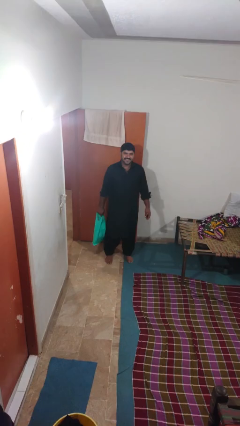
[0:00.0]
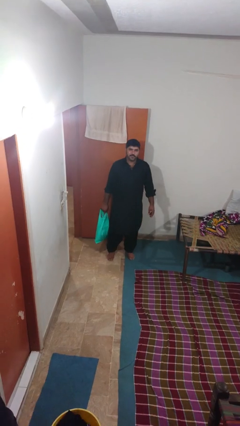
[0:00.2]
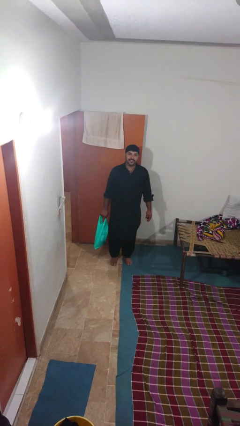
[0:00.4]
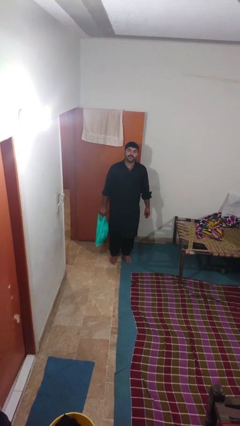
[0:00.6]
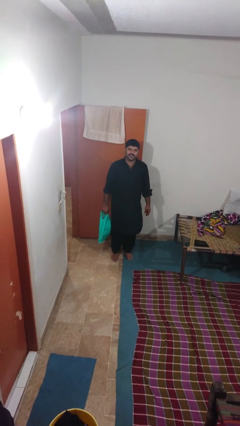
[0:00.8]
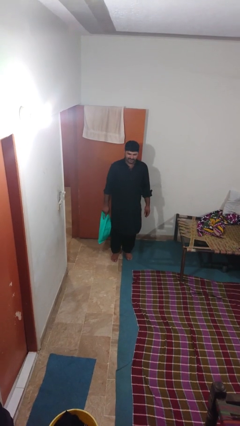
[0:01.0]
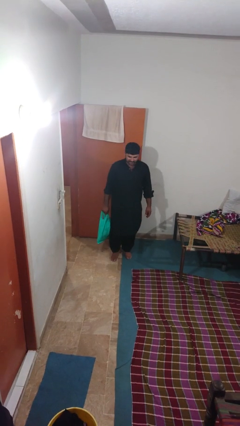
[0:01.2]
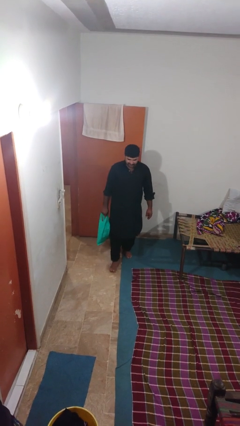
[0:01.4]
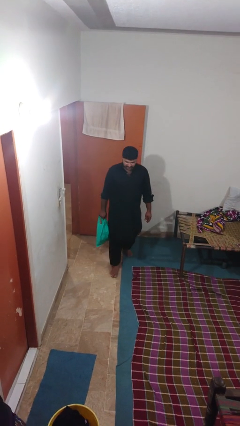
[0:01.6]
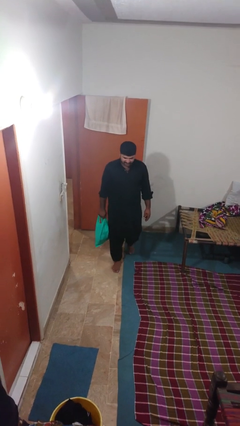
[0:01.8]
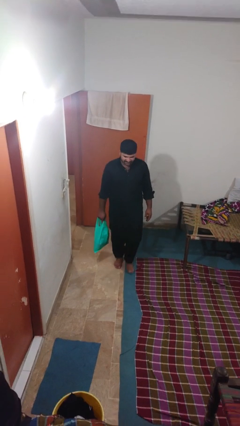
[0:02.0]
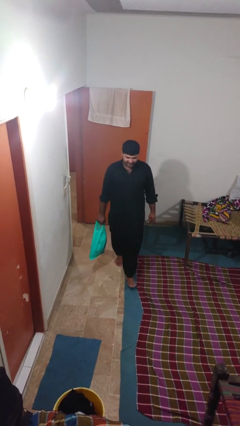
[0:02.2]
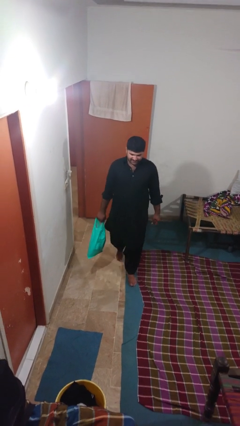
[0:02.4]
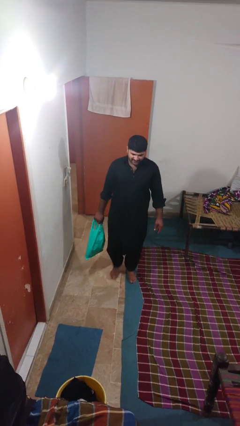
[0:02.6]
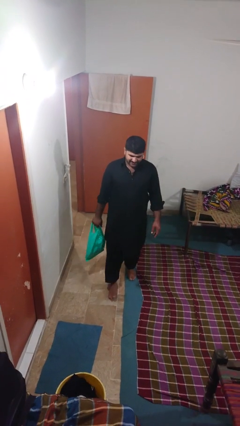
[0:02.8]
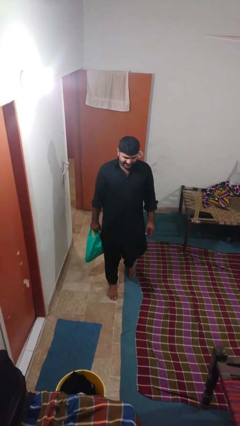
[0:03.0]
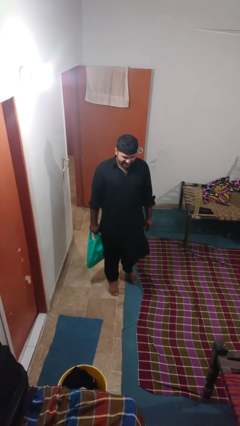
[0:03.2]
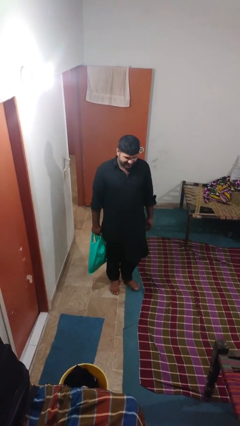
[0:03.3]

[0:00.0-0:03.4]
person carries groceries

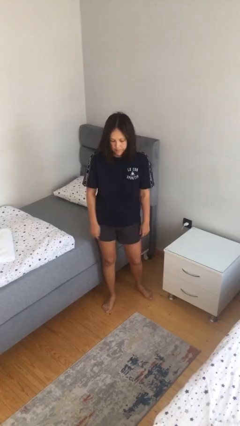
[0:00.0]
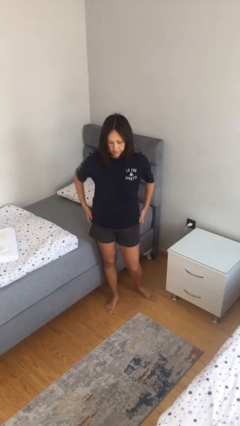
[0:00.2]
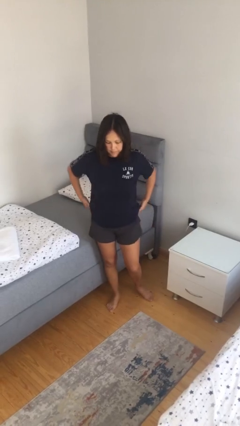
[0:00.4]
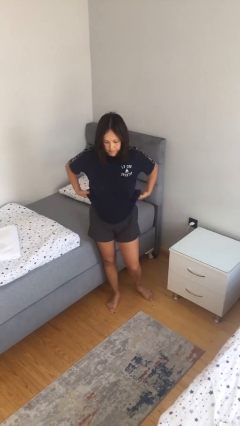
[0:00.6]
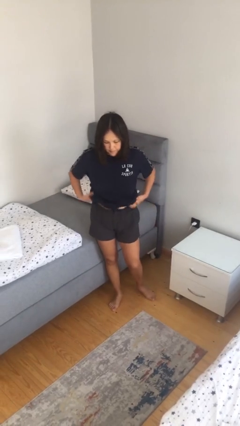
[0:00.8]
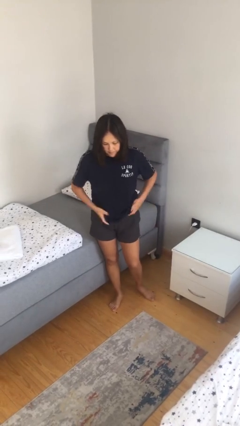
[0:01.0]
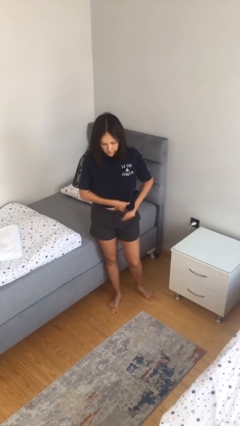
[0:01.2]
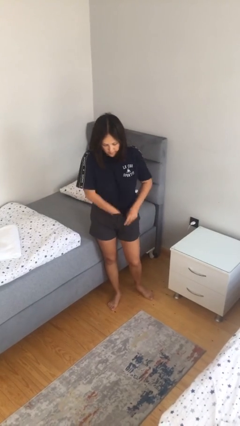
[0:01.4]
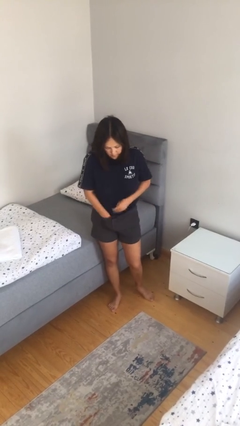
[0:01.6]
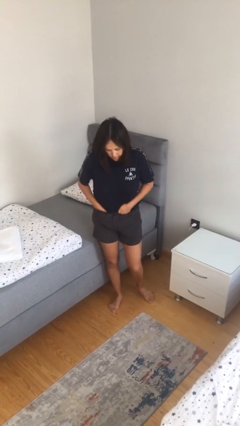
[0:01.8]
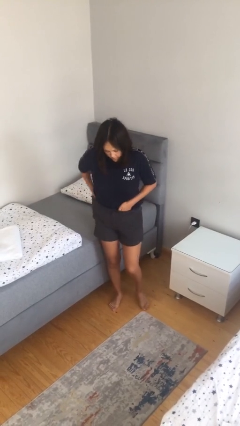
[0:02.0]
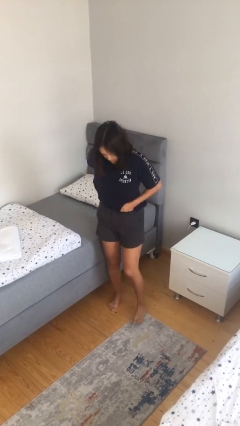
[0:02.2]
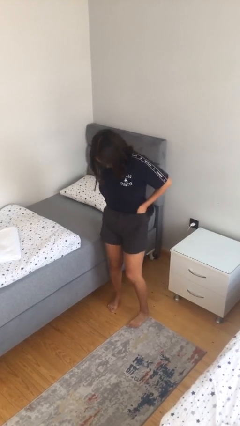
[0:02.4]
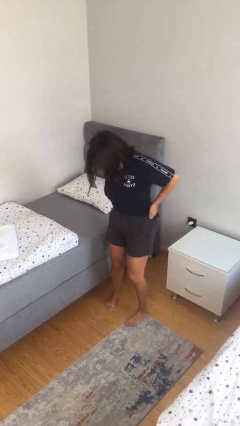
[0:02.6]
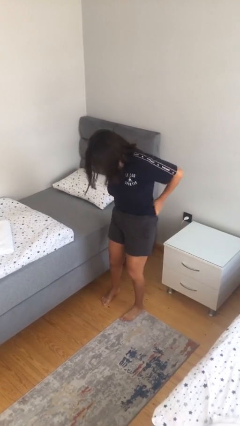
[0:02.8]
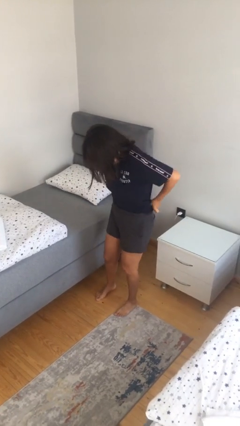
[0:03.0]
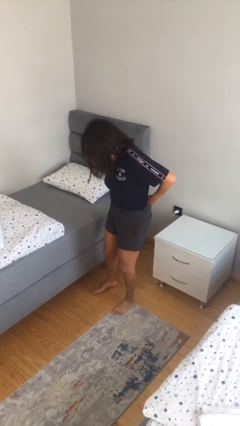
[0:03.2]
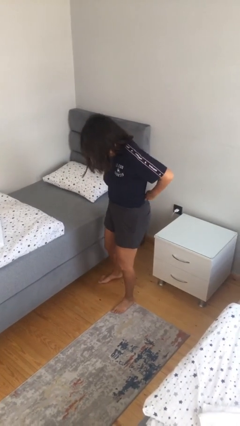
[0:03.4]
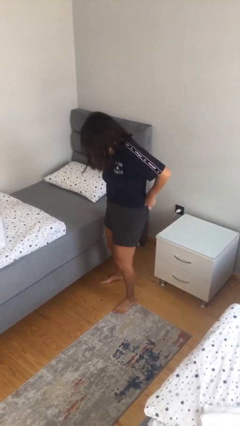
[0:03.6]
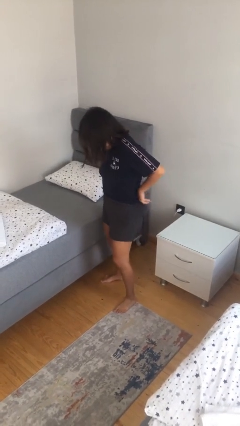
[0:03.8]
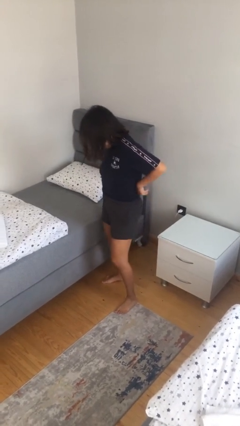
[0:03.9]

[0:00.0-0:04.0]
person tucks in shirt

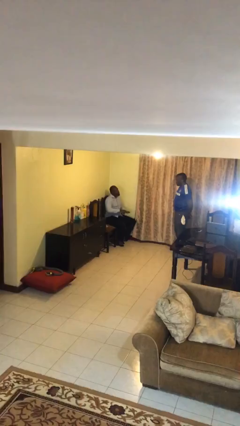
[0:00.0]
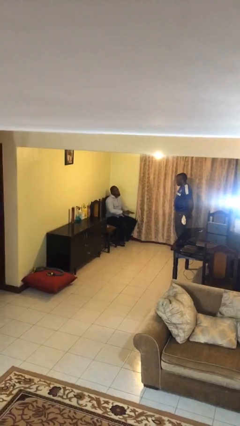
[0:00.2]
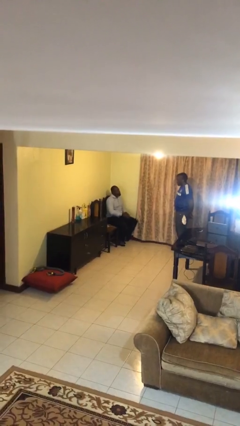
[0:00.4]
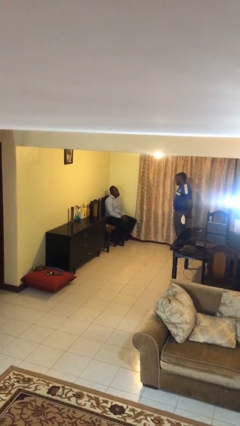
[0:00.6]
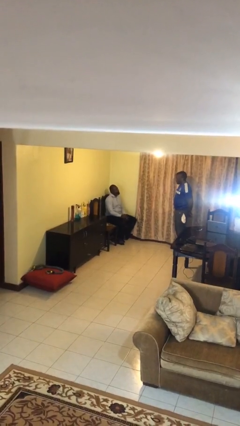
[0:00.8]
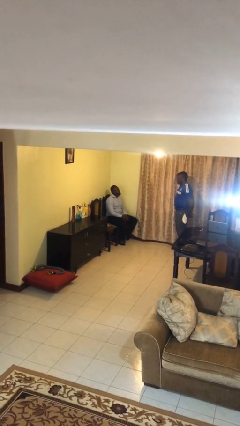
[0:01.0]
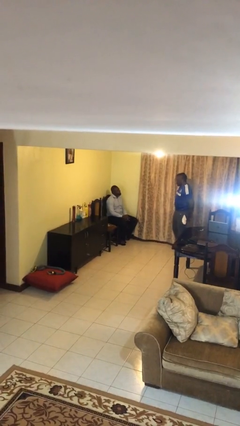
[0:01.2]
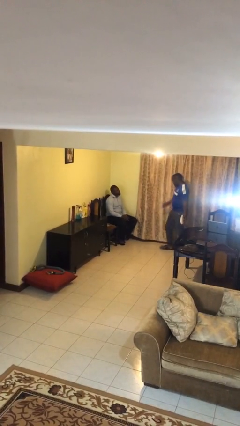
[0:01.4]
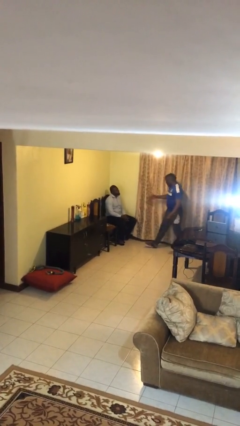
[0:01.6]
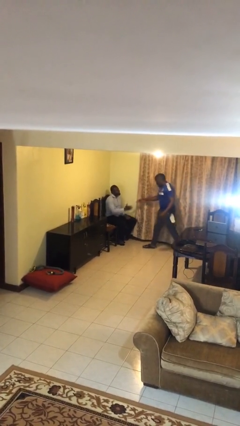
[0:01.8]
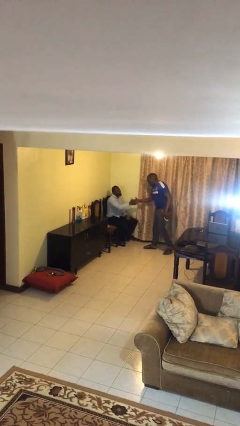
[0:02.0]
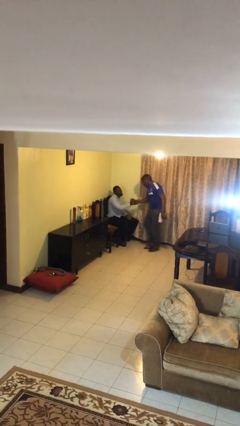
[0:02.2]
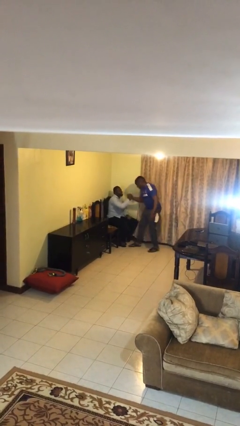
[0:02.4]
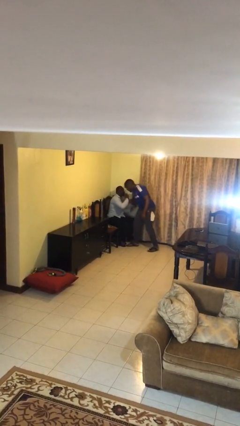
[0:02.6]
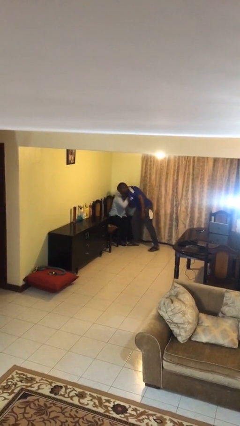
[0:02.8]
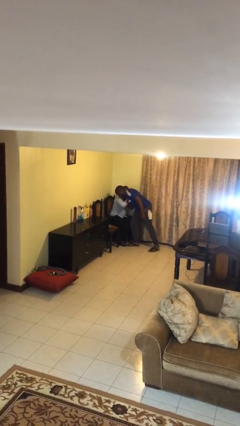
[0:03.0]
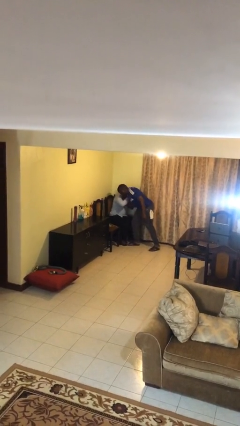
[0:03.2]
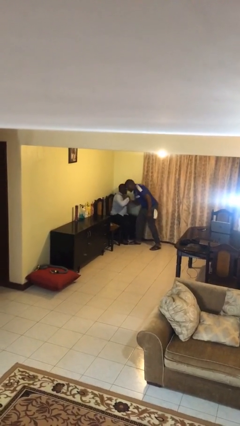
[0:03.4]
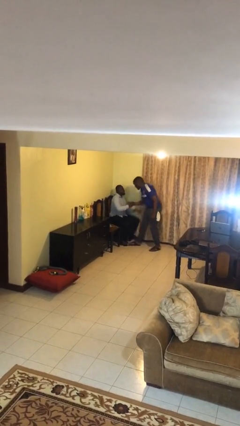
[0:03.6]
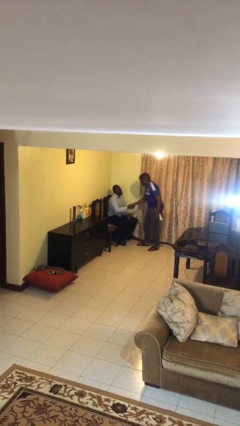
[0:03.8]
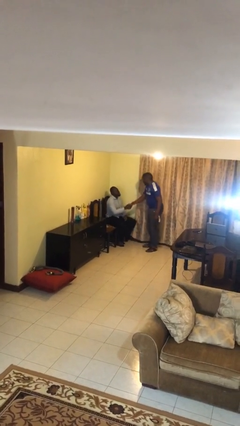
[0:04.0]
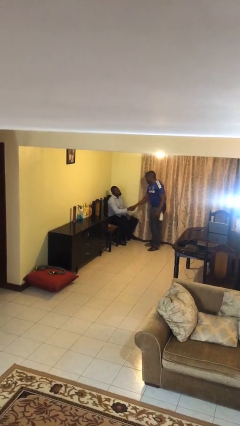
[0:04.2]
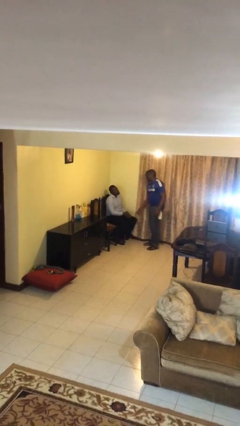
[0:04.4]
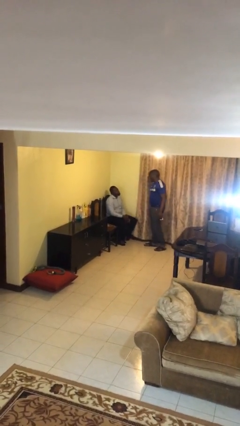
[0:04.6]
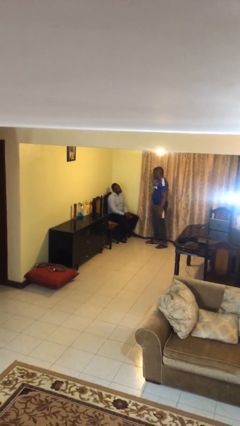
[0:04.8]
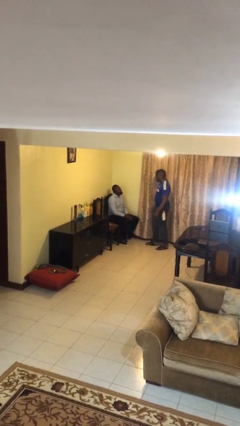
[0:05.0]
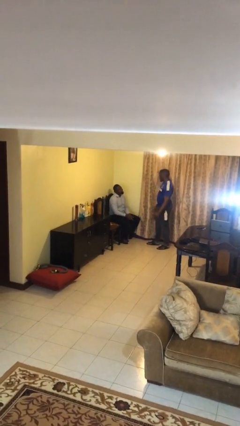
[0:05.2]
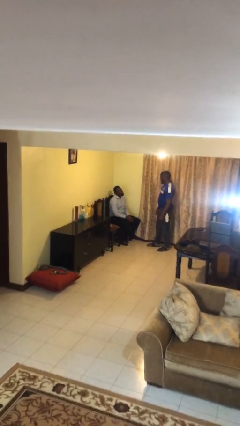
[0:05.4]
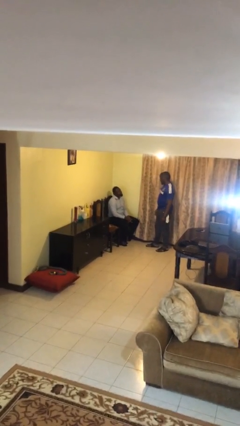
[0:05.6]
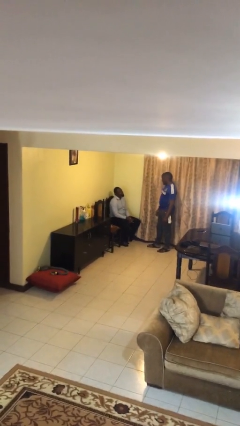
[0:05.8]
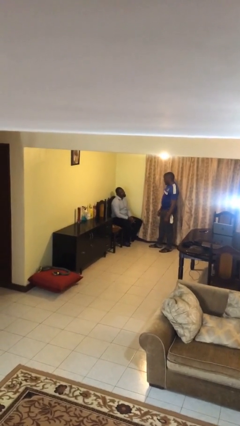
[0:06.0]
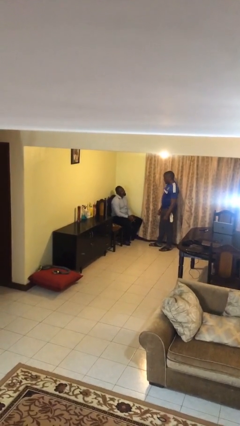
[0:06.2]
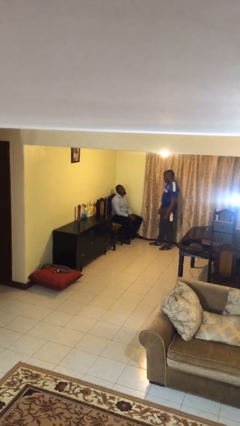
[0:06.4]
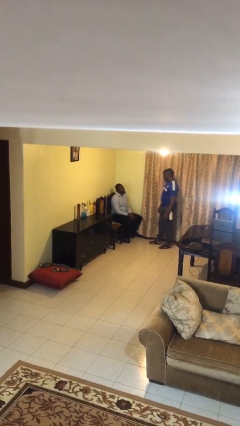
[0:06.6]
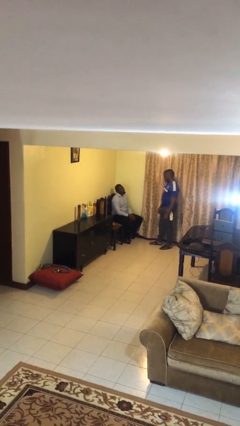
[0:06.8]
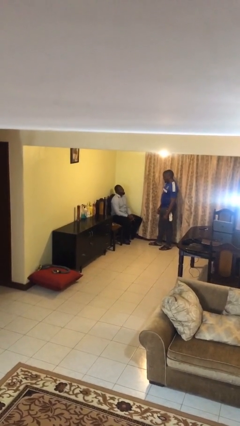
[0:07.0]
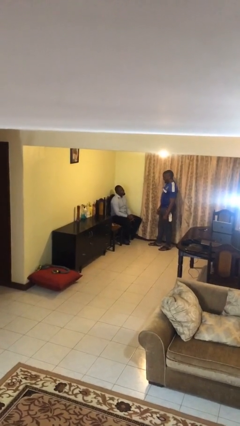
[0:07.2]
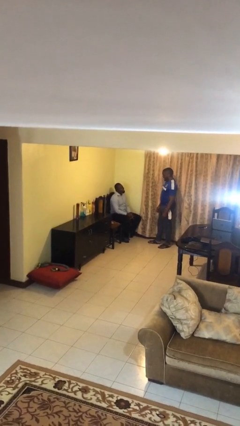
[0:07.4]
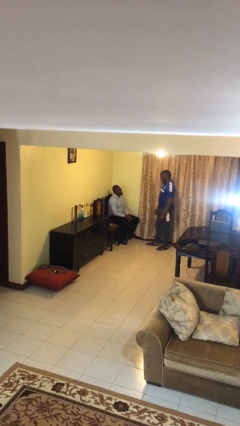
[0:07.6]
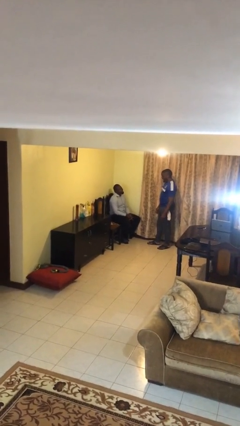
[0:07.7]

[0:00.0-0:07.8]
person embraces person

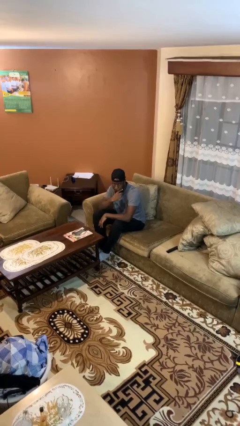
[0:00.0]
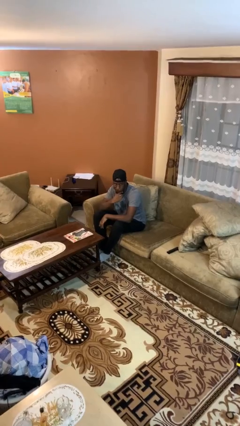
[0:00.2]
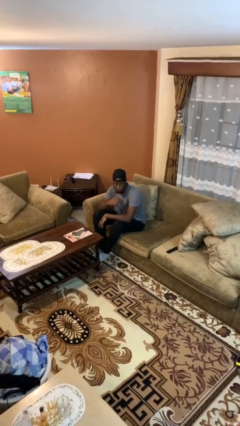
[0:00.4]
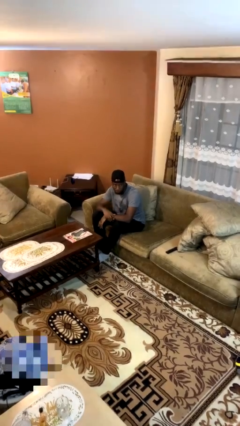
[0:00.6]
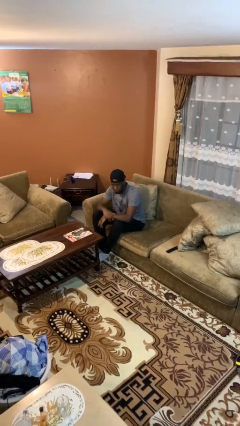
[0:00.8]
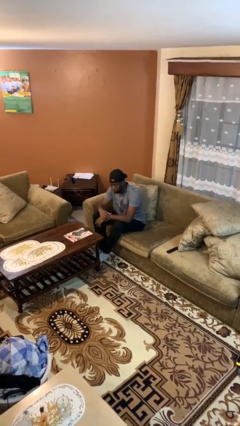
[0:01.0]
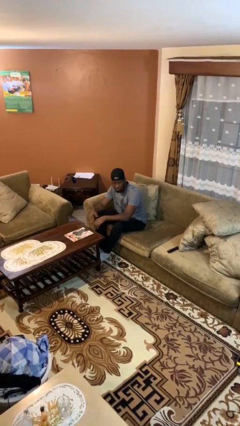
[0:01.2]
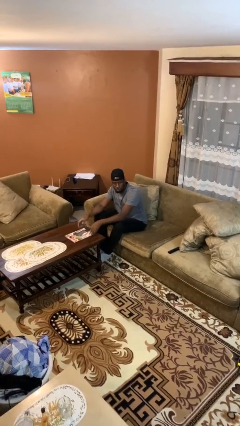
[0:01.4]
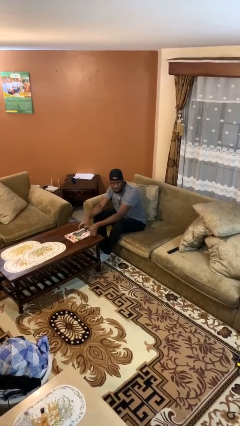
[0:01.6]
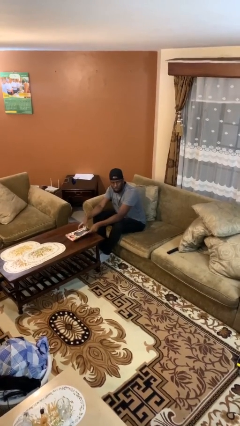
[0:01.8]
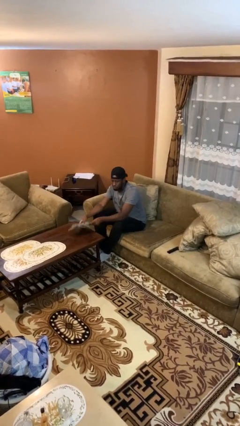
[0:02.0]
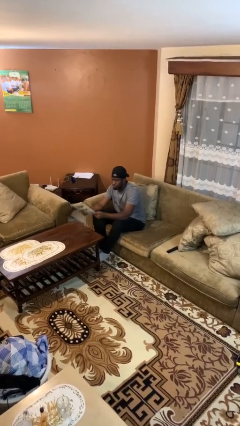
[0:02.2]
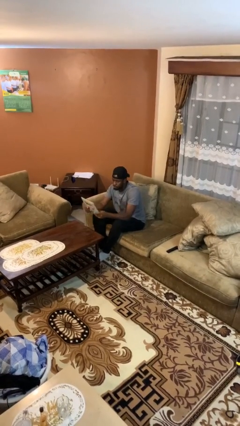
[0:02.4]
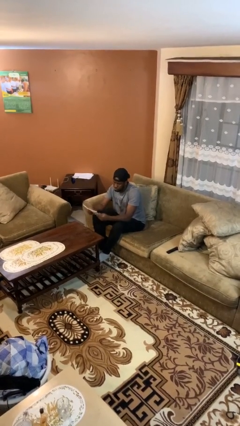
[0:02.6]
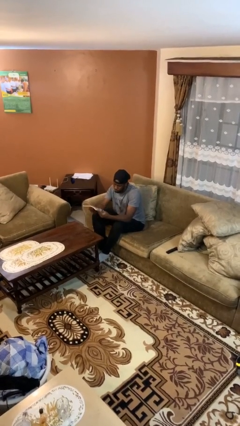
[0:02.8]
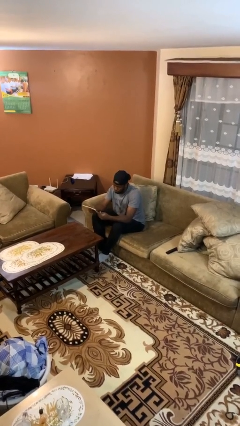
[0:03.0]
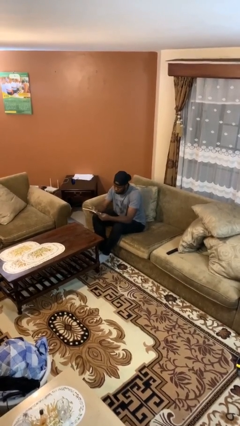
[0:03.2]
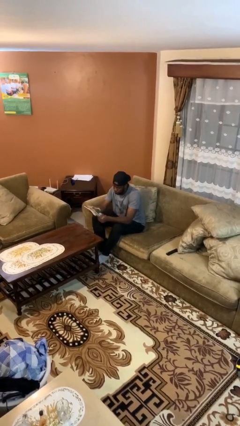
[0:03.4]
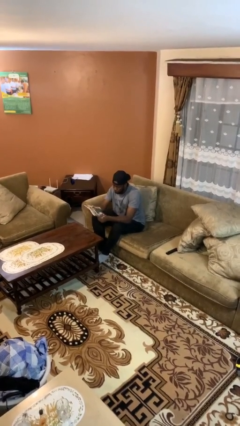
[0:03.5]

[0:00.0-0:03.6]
person picks up object from table
